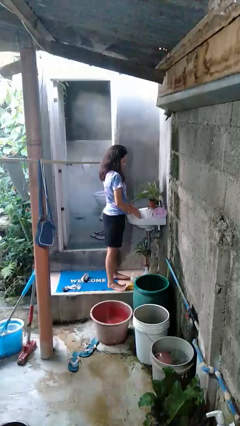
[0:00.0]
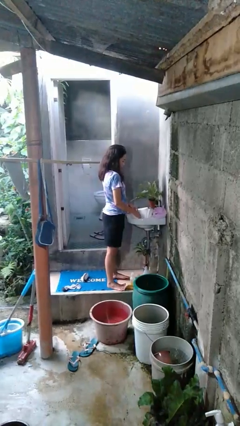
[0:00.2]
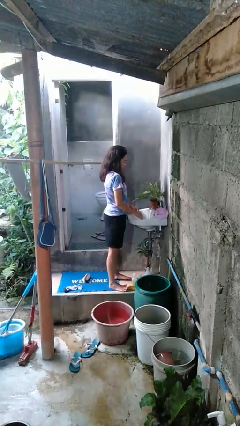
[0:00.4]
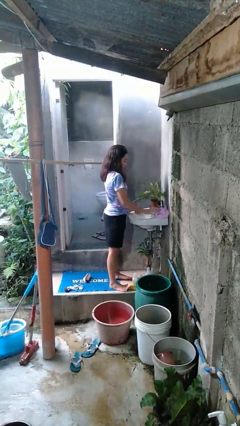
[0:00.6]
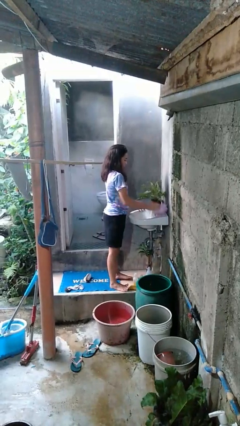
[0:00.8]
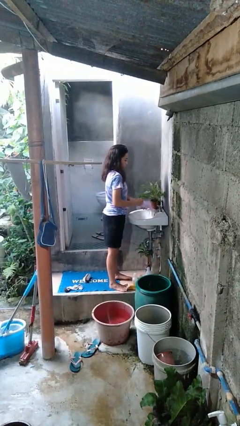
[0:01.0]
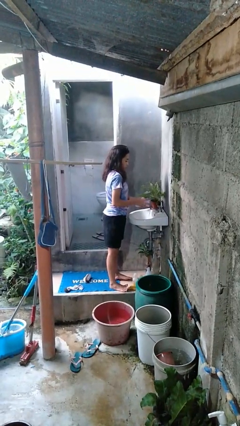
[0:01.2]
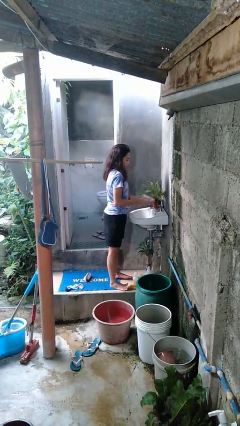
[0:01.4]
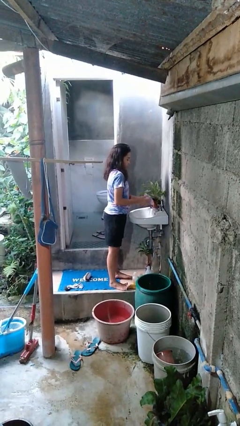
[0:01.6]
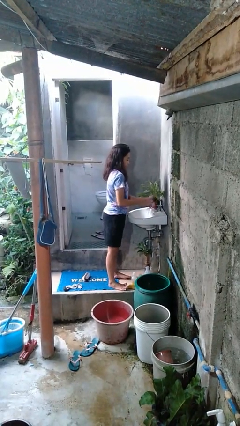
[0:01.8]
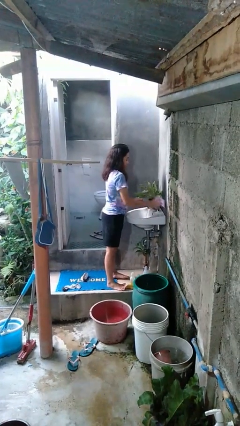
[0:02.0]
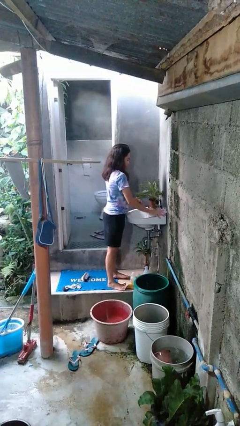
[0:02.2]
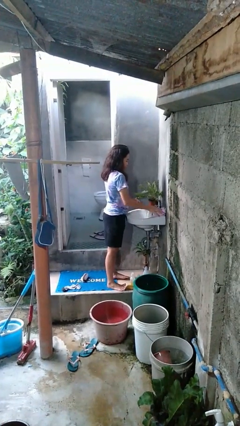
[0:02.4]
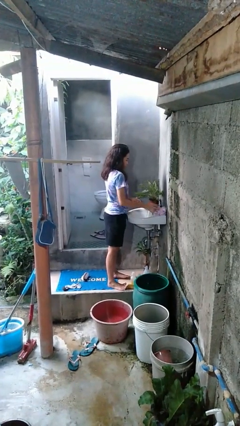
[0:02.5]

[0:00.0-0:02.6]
person dries hands with towel

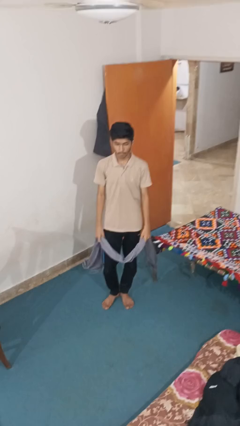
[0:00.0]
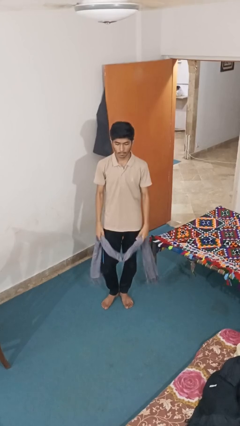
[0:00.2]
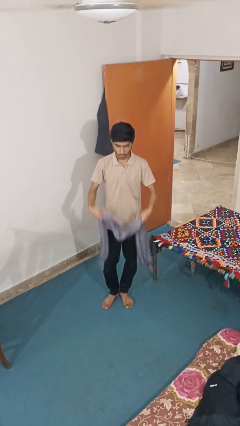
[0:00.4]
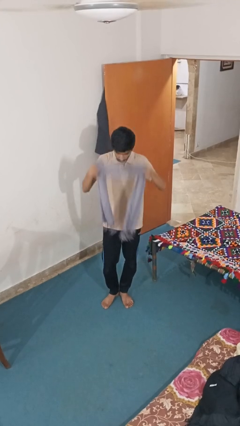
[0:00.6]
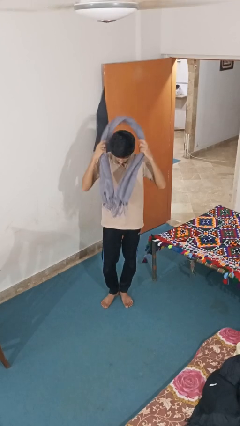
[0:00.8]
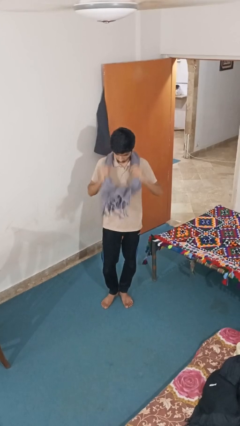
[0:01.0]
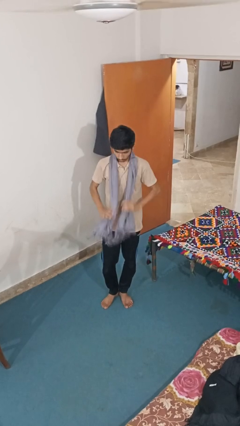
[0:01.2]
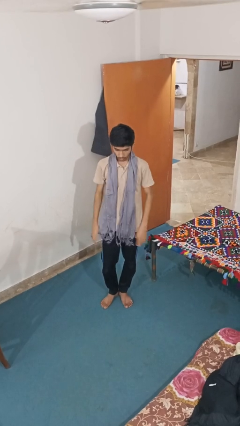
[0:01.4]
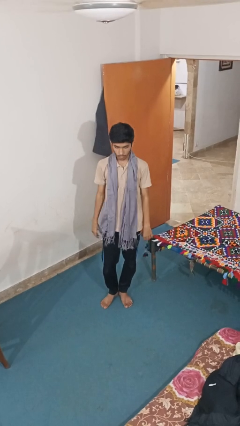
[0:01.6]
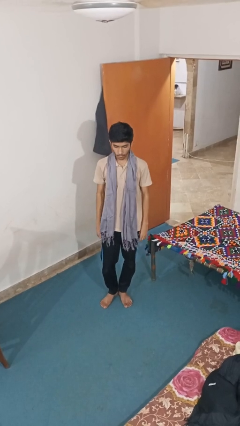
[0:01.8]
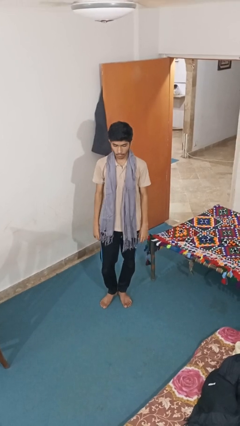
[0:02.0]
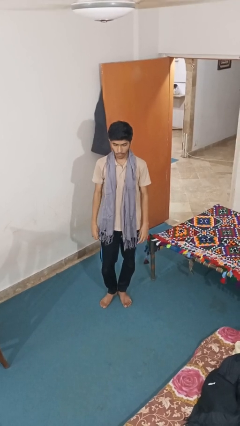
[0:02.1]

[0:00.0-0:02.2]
person puts on scarf

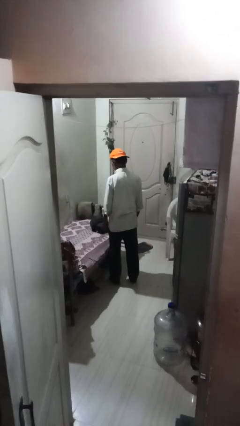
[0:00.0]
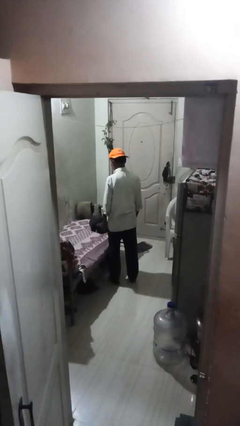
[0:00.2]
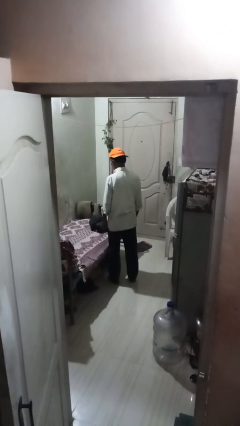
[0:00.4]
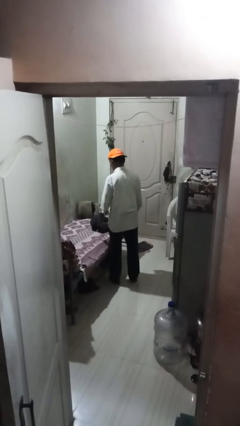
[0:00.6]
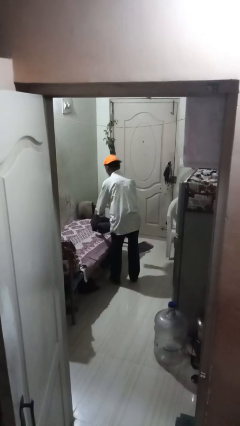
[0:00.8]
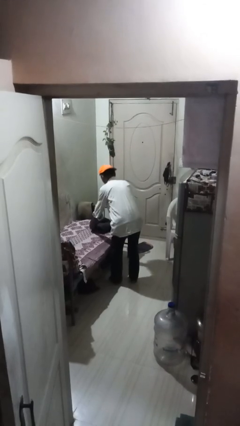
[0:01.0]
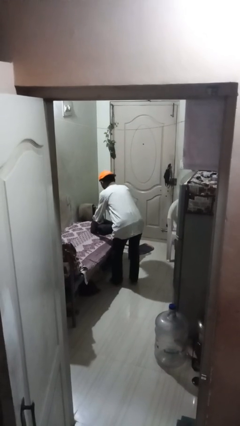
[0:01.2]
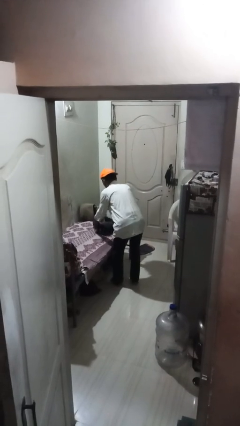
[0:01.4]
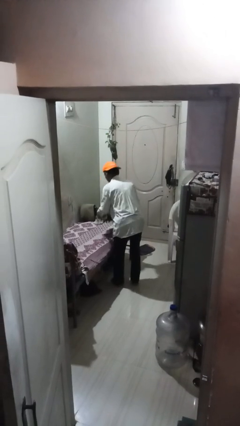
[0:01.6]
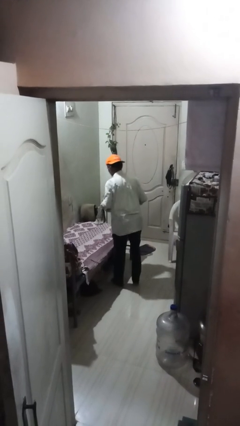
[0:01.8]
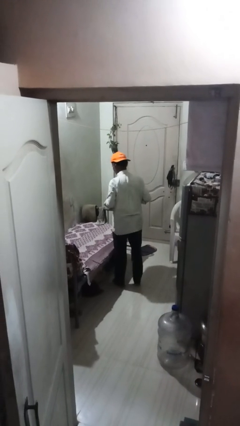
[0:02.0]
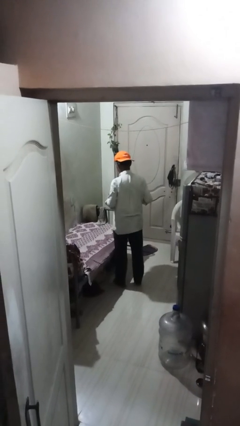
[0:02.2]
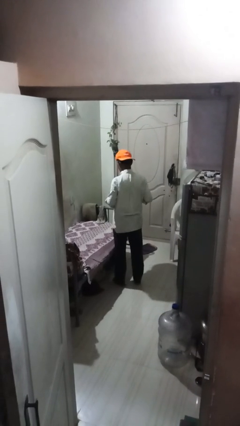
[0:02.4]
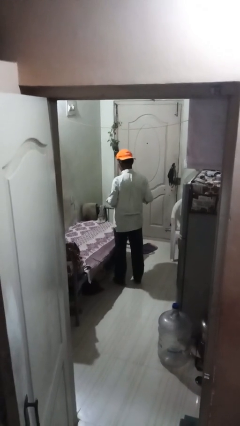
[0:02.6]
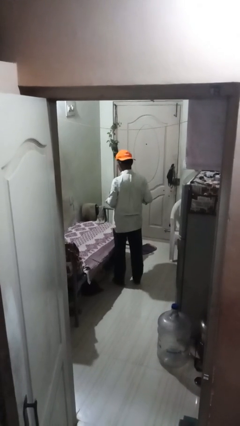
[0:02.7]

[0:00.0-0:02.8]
person picks up object from bed

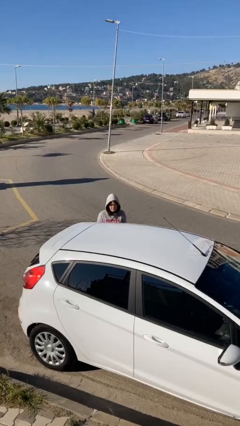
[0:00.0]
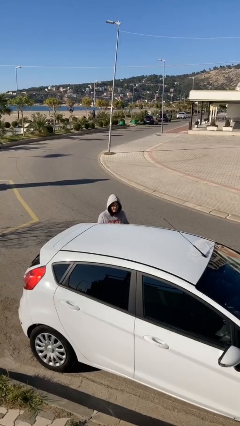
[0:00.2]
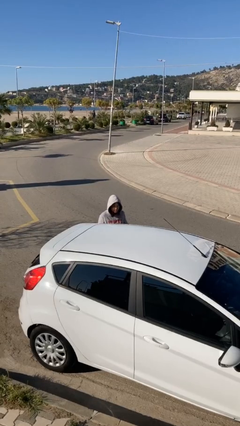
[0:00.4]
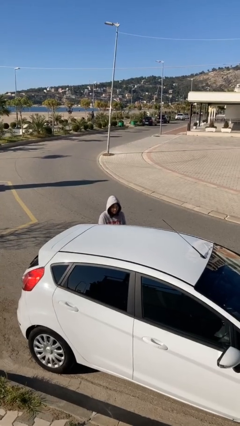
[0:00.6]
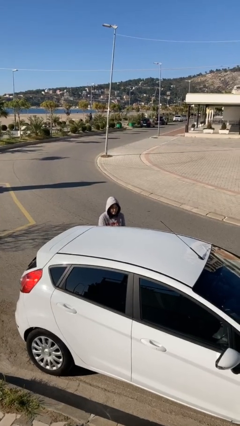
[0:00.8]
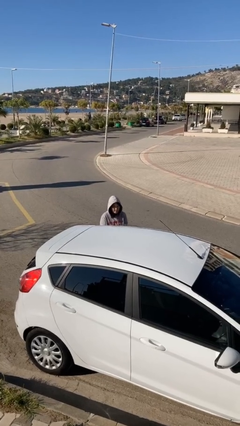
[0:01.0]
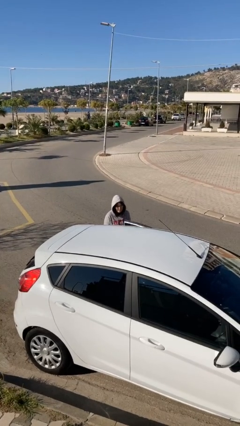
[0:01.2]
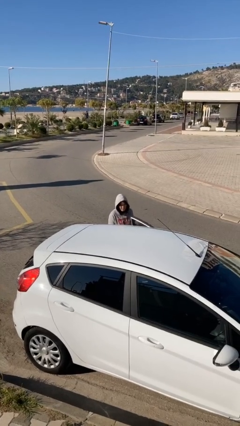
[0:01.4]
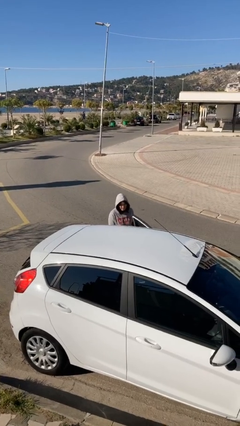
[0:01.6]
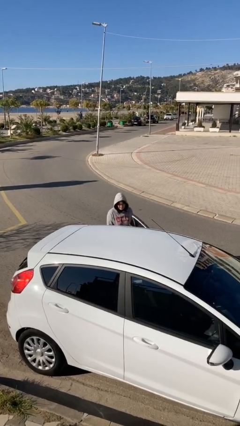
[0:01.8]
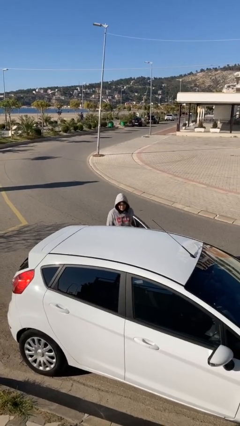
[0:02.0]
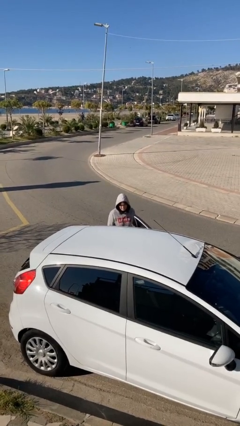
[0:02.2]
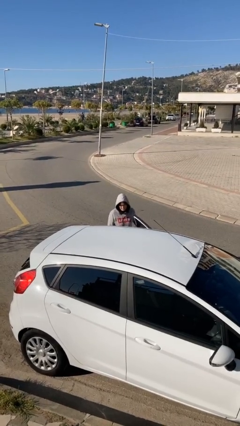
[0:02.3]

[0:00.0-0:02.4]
person opens car door

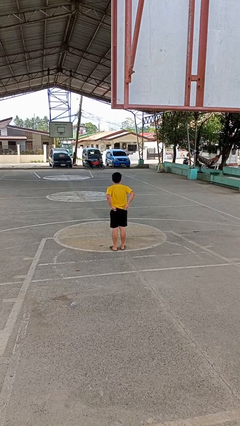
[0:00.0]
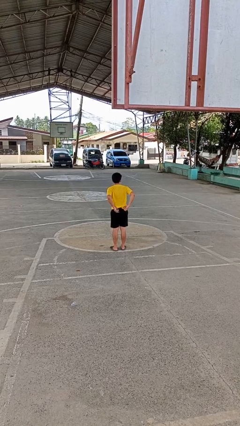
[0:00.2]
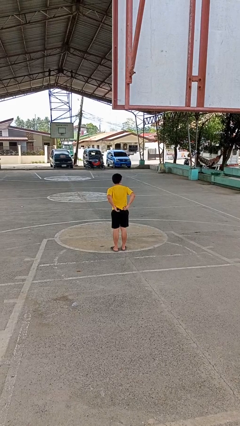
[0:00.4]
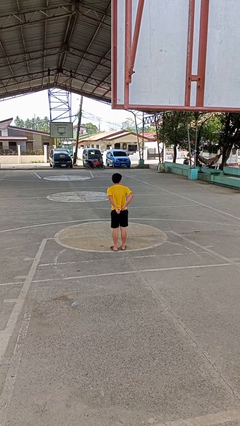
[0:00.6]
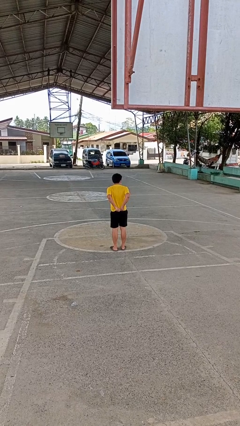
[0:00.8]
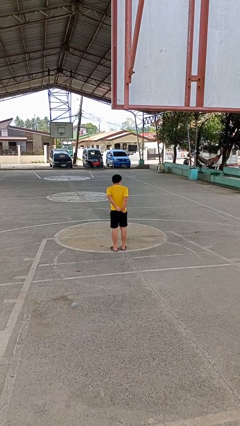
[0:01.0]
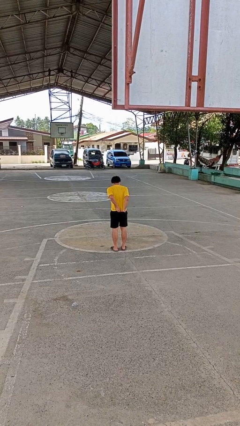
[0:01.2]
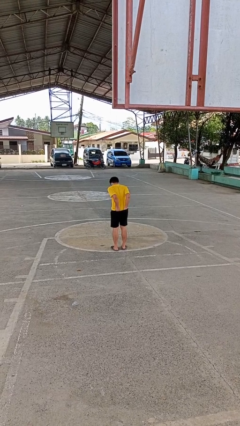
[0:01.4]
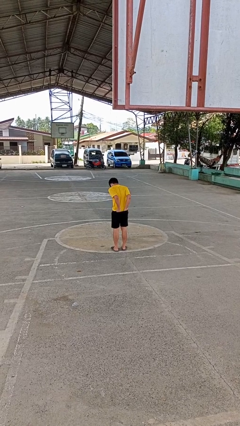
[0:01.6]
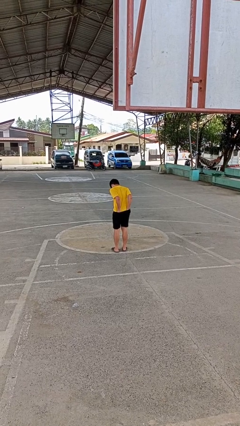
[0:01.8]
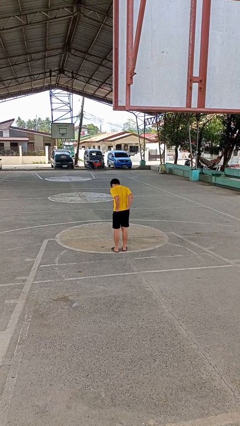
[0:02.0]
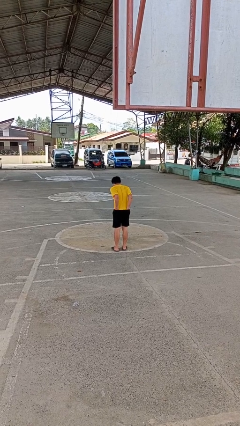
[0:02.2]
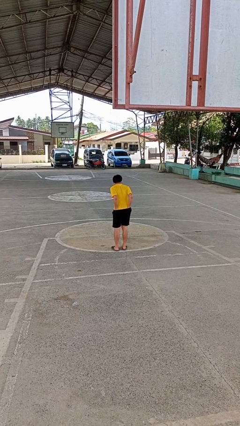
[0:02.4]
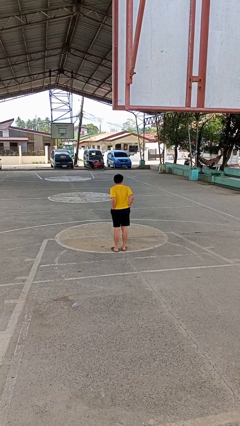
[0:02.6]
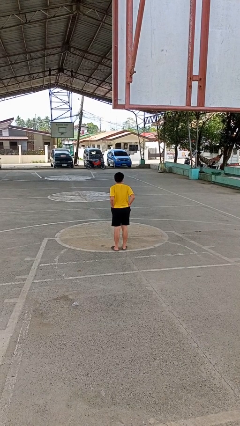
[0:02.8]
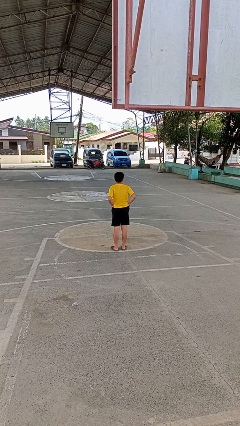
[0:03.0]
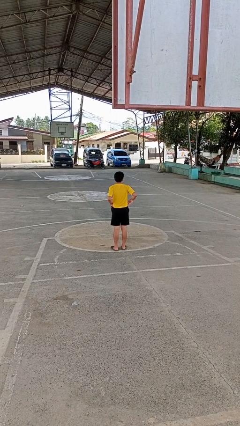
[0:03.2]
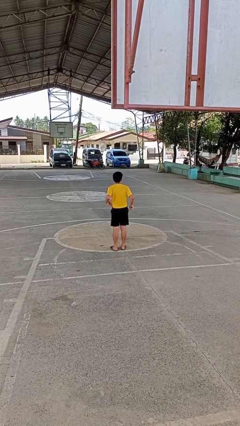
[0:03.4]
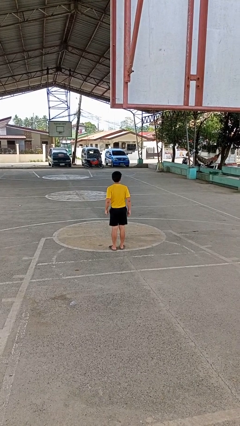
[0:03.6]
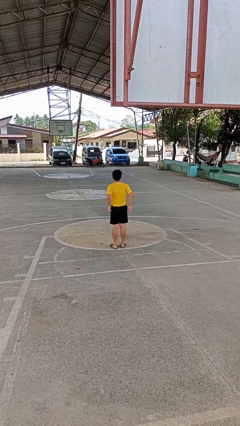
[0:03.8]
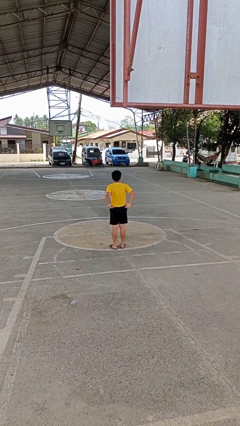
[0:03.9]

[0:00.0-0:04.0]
person tucks in shirt

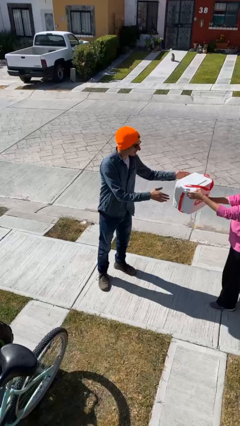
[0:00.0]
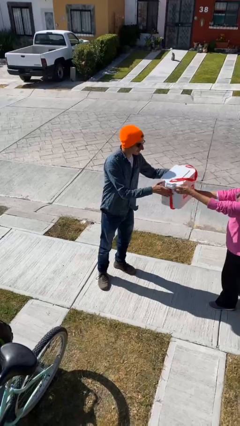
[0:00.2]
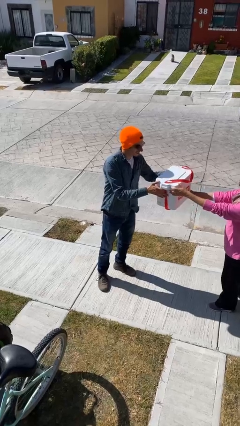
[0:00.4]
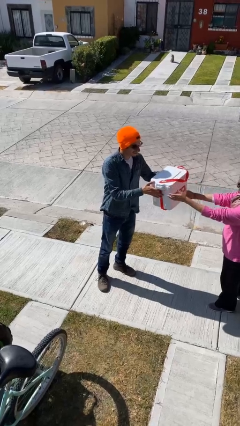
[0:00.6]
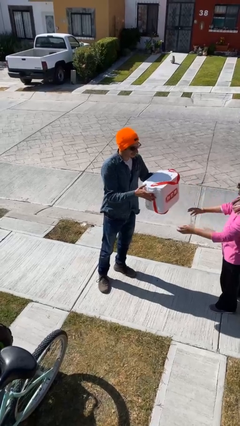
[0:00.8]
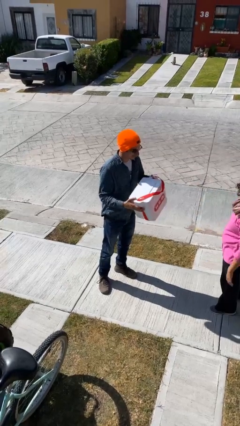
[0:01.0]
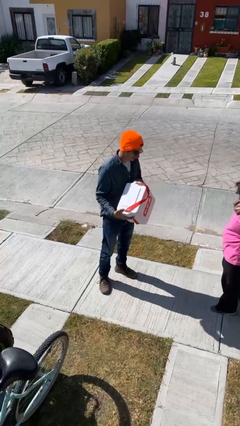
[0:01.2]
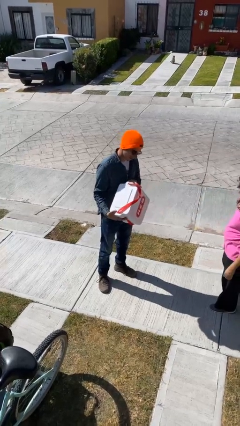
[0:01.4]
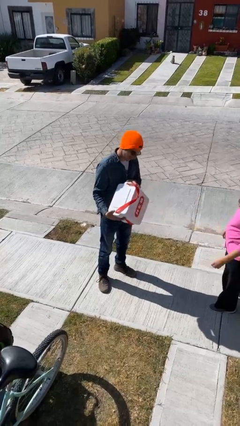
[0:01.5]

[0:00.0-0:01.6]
person transfers object to person

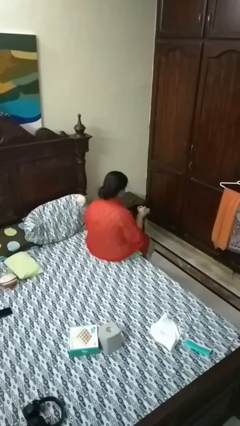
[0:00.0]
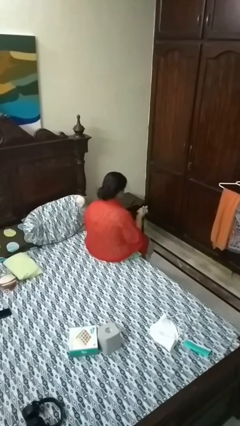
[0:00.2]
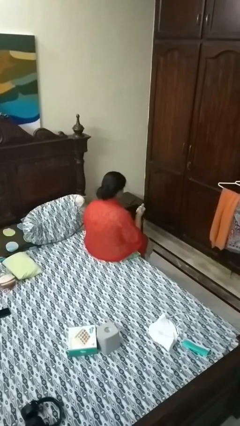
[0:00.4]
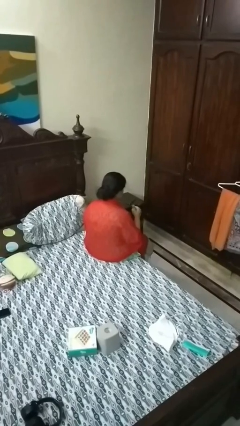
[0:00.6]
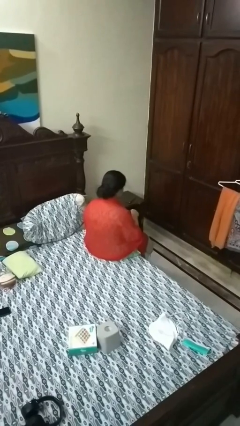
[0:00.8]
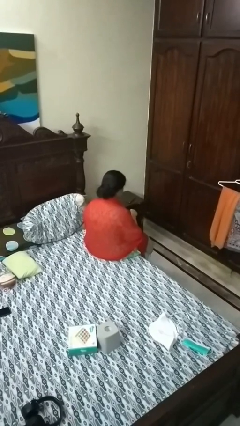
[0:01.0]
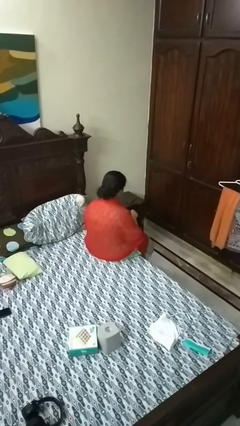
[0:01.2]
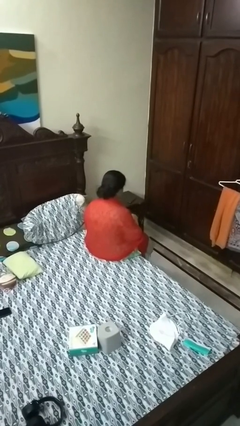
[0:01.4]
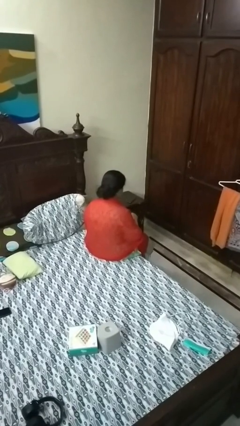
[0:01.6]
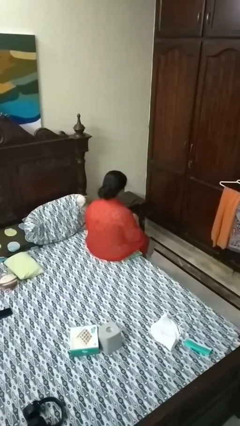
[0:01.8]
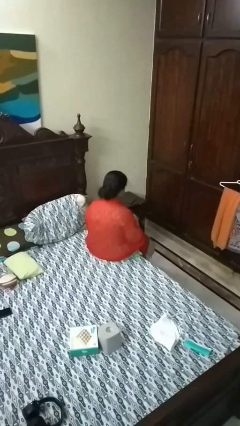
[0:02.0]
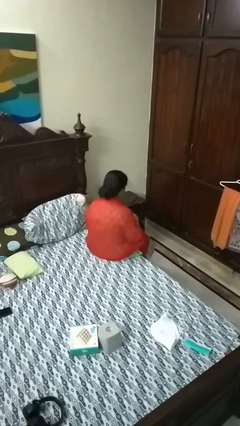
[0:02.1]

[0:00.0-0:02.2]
person puts object into purse
